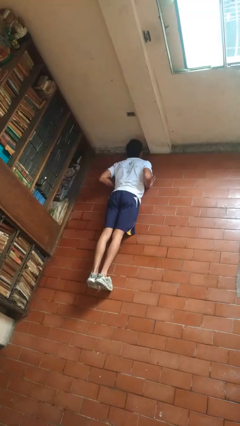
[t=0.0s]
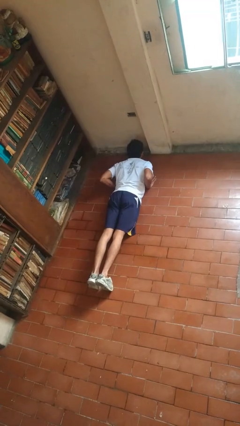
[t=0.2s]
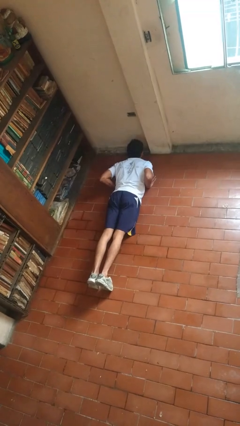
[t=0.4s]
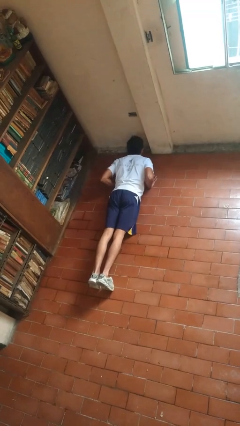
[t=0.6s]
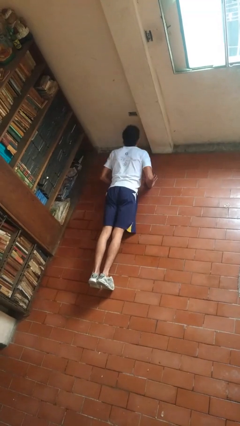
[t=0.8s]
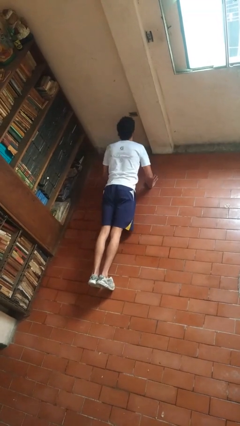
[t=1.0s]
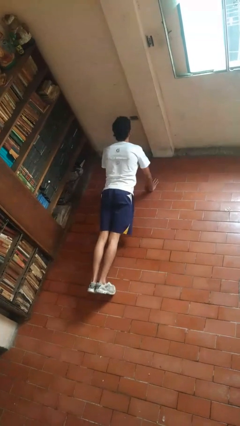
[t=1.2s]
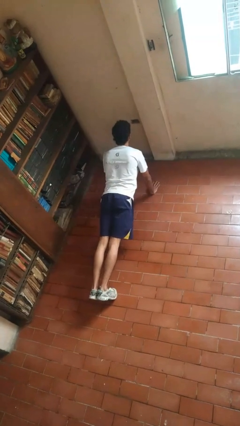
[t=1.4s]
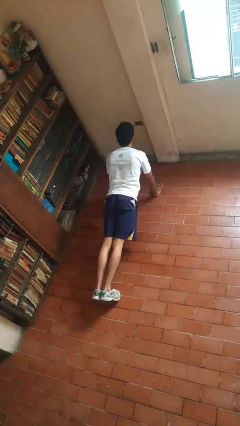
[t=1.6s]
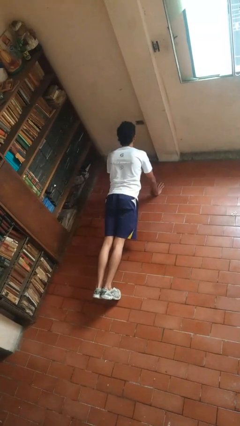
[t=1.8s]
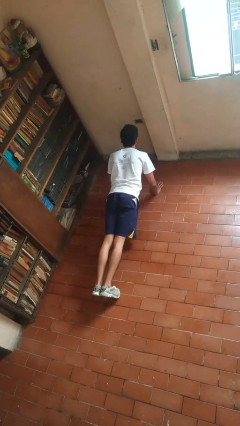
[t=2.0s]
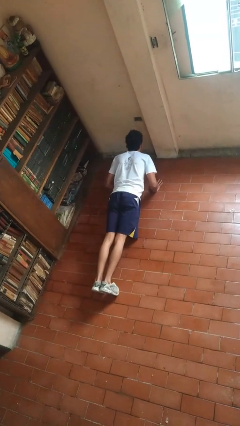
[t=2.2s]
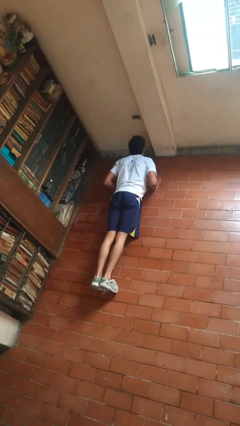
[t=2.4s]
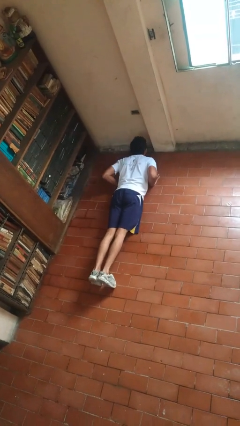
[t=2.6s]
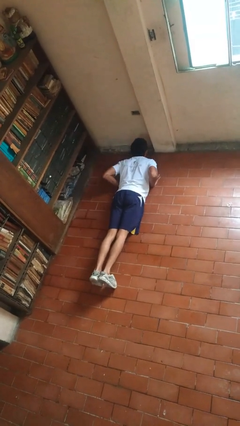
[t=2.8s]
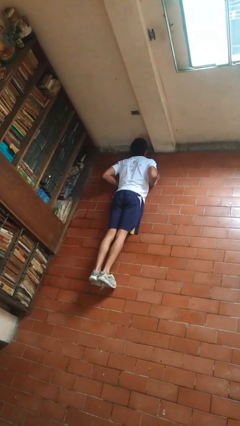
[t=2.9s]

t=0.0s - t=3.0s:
person exercises with pushup

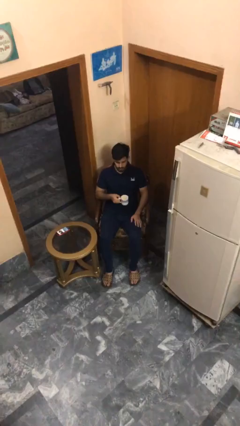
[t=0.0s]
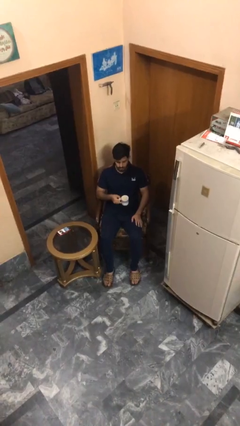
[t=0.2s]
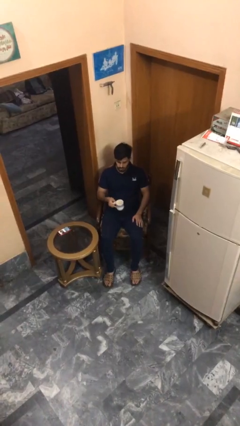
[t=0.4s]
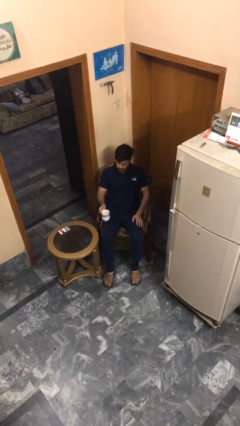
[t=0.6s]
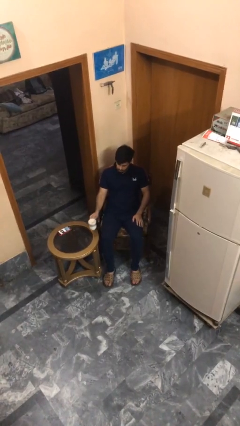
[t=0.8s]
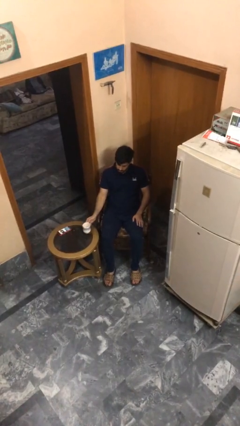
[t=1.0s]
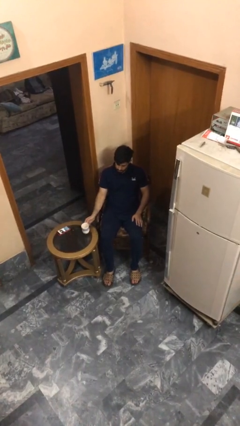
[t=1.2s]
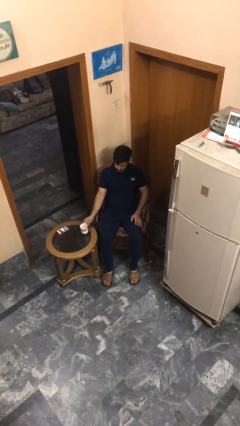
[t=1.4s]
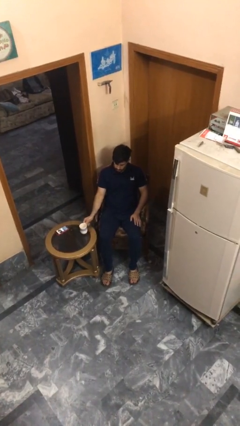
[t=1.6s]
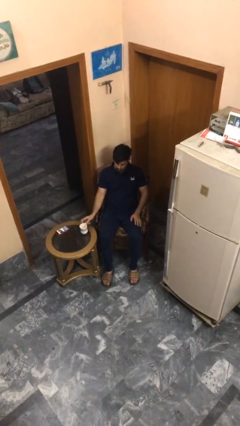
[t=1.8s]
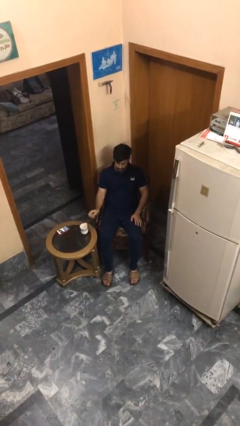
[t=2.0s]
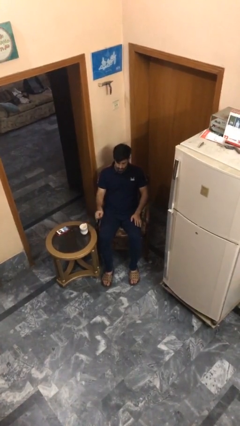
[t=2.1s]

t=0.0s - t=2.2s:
person puts down object on table

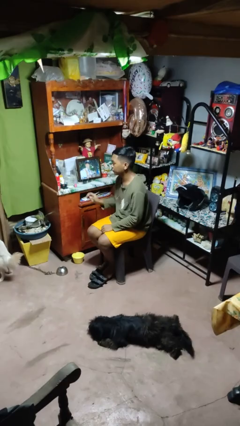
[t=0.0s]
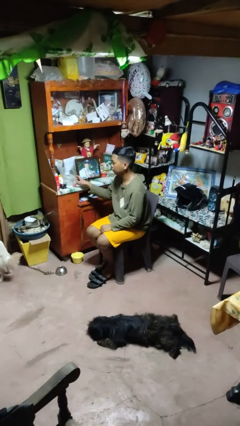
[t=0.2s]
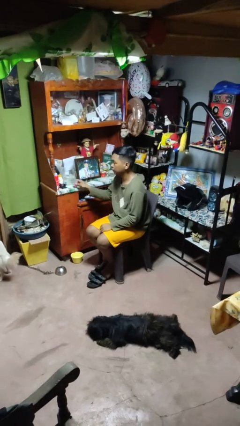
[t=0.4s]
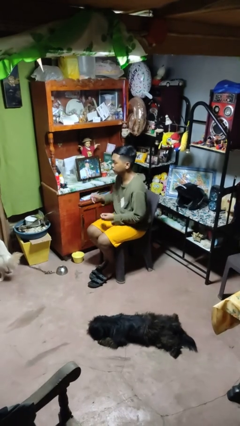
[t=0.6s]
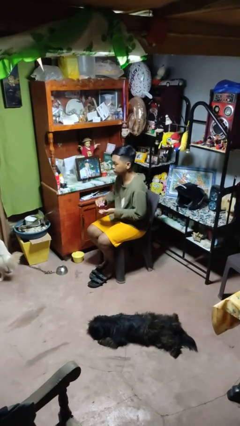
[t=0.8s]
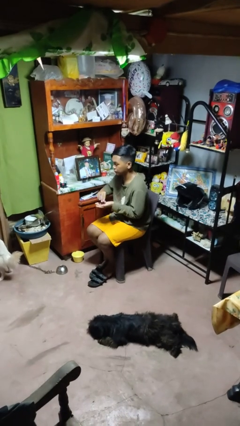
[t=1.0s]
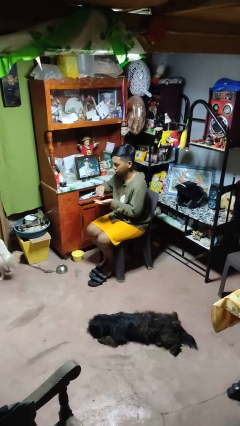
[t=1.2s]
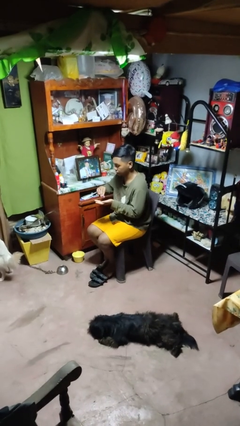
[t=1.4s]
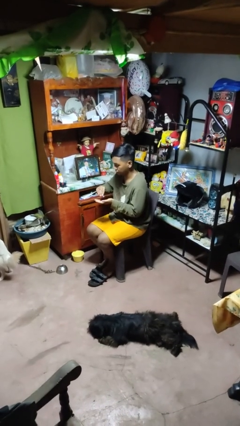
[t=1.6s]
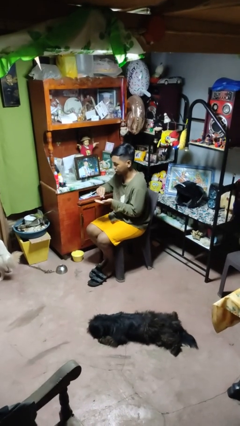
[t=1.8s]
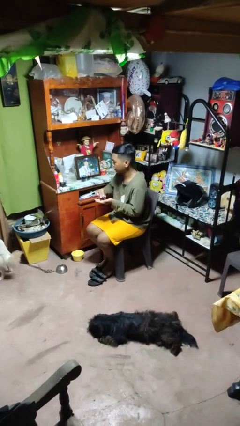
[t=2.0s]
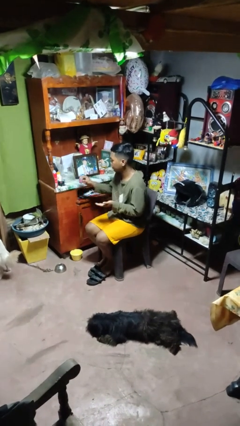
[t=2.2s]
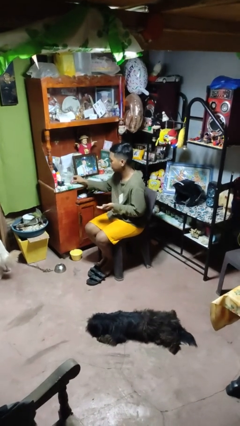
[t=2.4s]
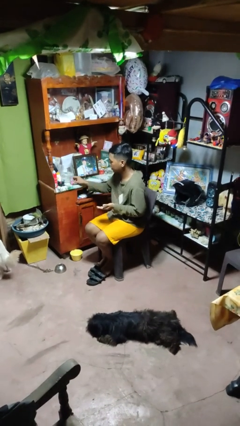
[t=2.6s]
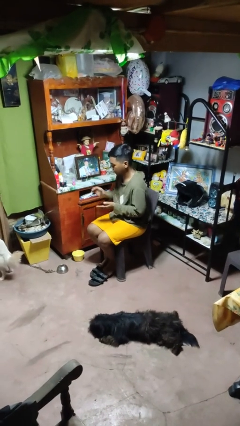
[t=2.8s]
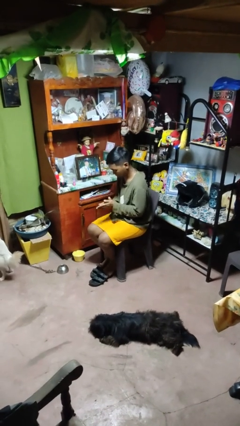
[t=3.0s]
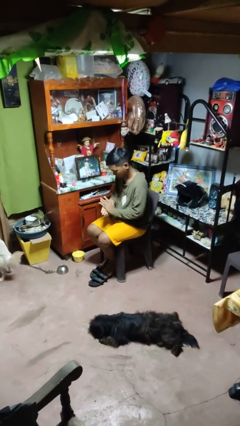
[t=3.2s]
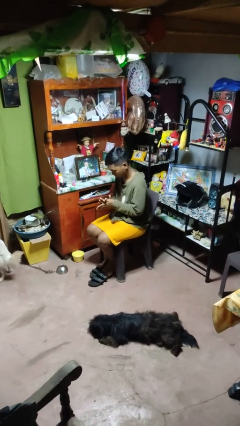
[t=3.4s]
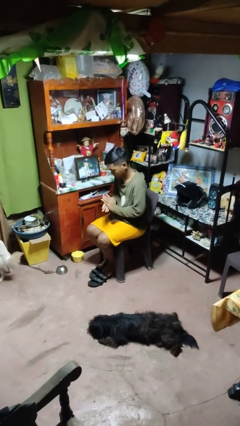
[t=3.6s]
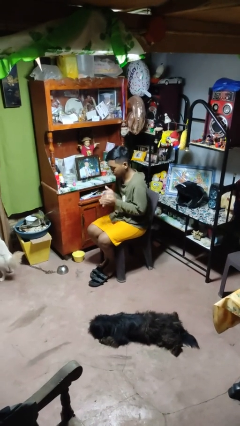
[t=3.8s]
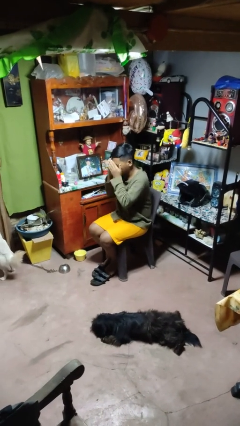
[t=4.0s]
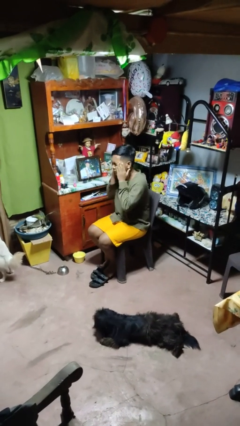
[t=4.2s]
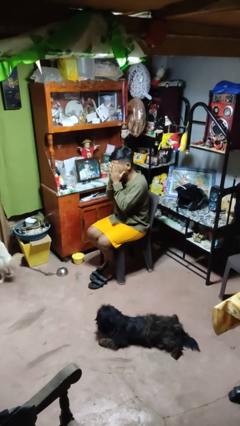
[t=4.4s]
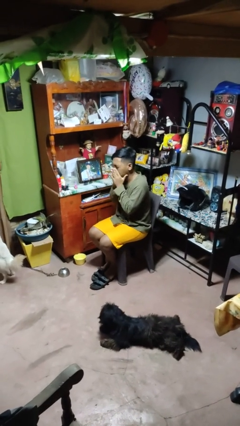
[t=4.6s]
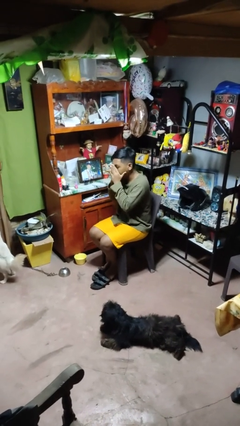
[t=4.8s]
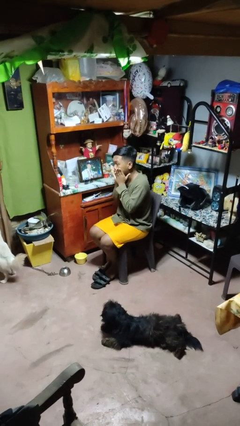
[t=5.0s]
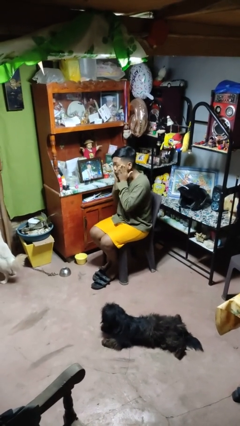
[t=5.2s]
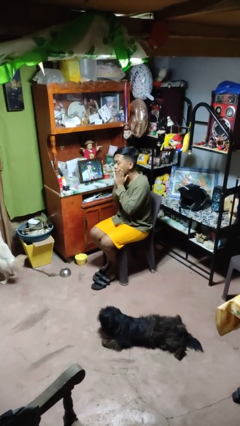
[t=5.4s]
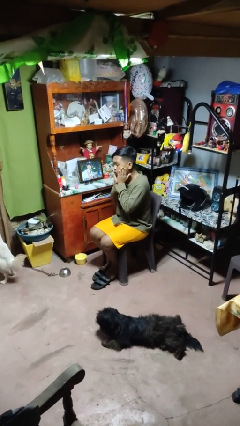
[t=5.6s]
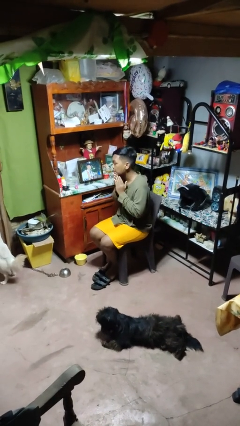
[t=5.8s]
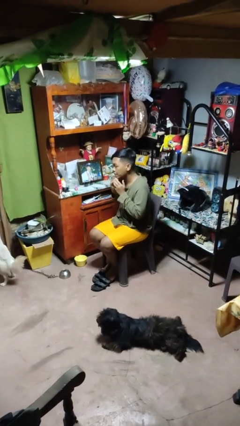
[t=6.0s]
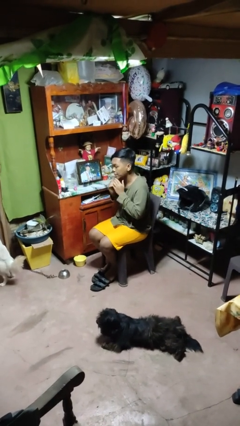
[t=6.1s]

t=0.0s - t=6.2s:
person applies facial moisturizer

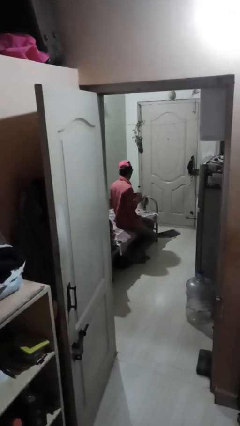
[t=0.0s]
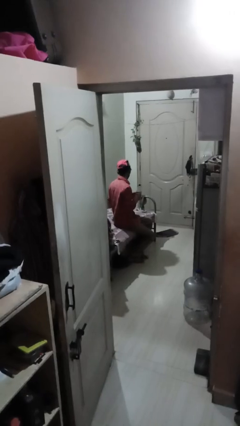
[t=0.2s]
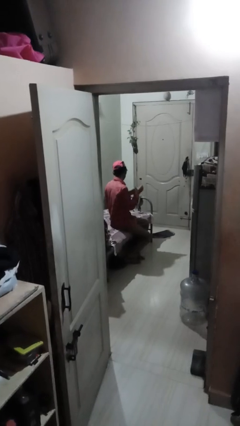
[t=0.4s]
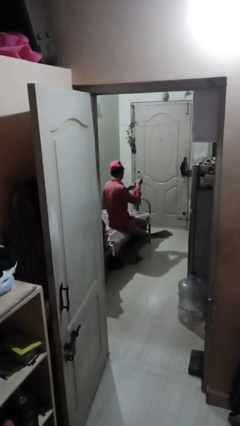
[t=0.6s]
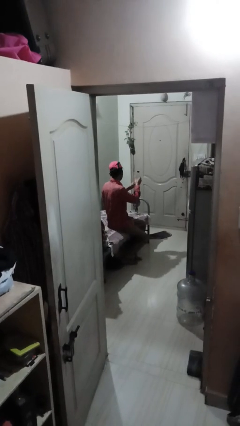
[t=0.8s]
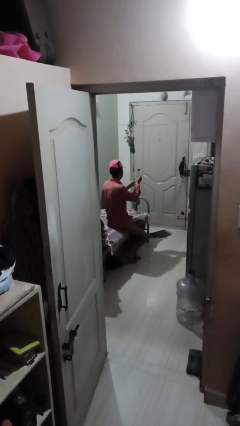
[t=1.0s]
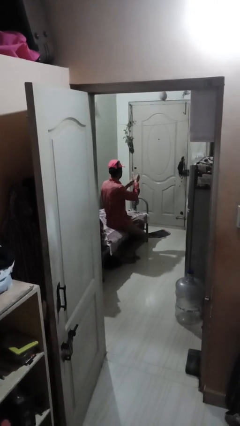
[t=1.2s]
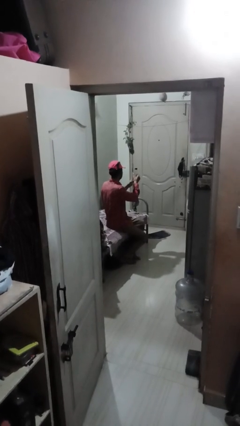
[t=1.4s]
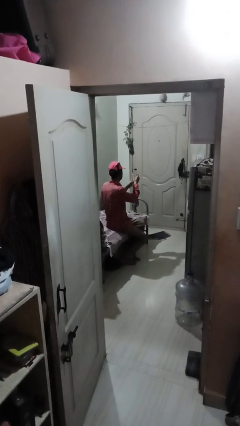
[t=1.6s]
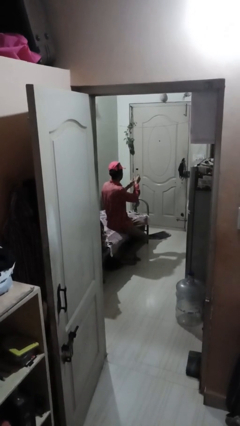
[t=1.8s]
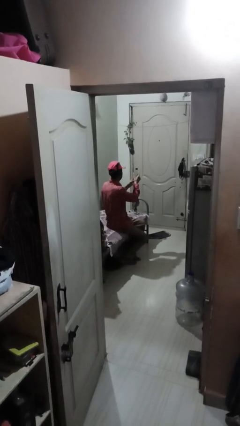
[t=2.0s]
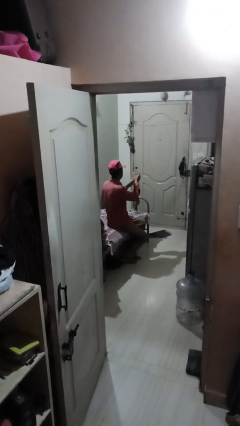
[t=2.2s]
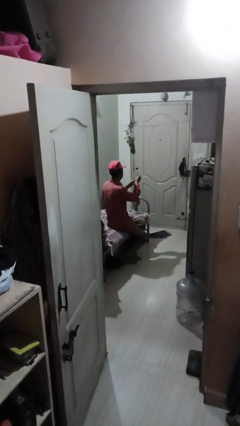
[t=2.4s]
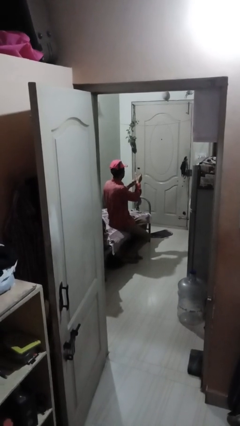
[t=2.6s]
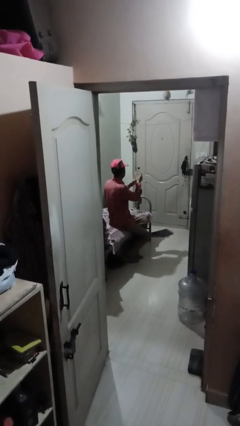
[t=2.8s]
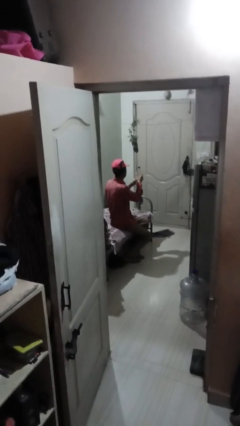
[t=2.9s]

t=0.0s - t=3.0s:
person squeezes object

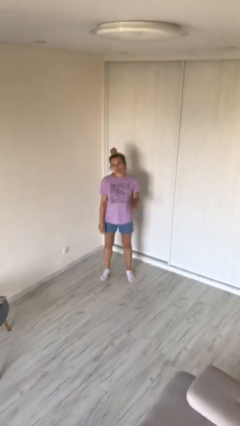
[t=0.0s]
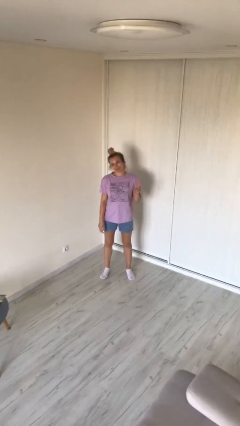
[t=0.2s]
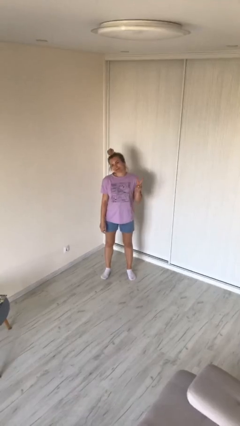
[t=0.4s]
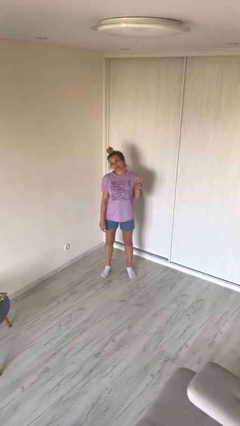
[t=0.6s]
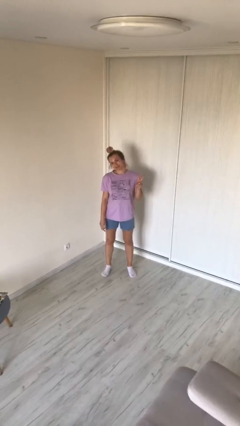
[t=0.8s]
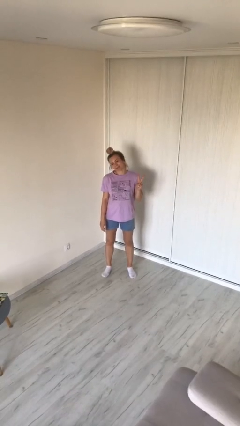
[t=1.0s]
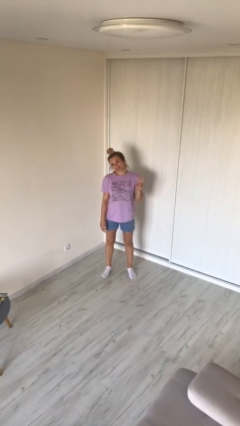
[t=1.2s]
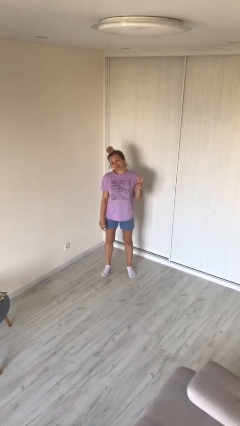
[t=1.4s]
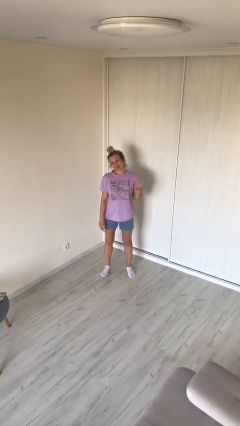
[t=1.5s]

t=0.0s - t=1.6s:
person gestures peace

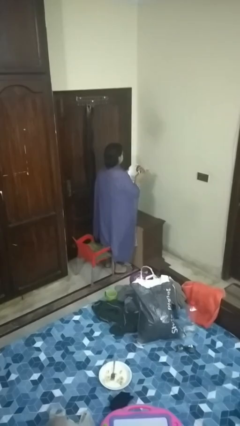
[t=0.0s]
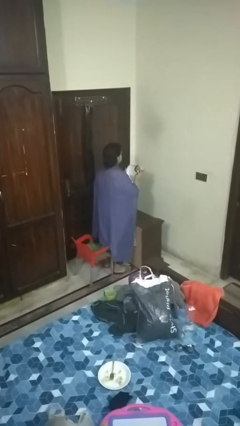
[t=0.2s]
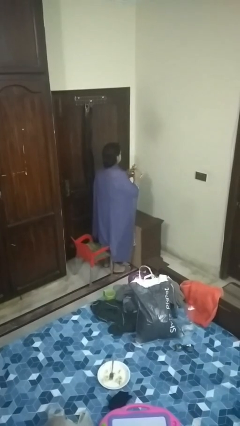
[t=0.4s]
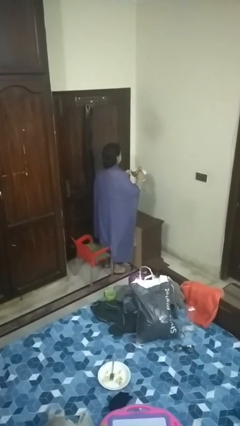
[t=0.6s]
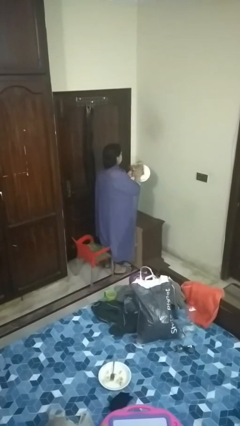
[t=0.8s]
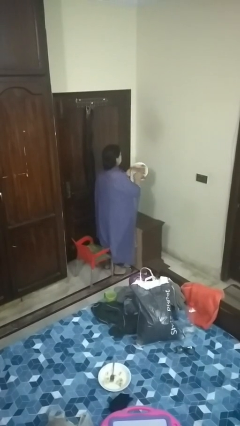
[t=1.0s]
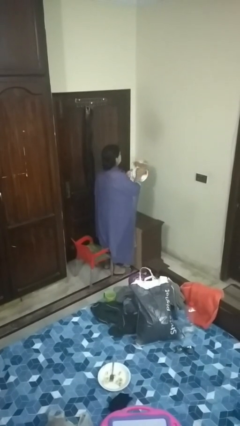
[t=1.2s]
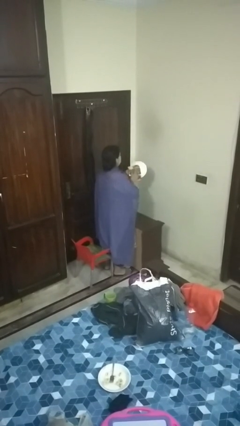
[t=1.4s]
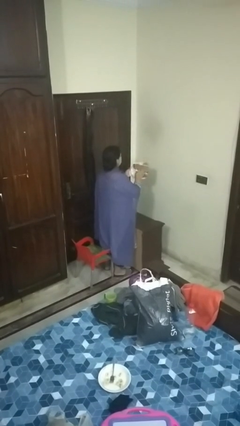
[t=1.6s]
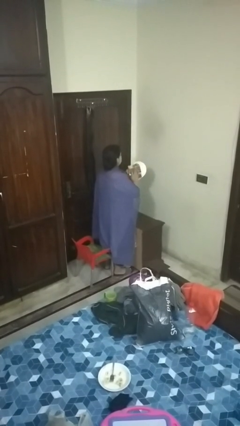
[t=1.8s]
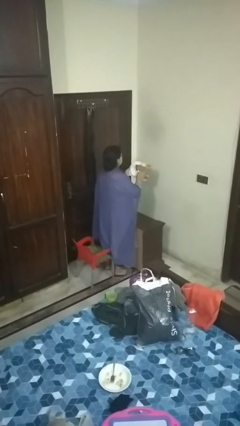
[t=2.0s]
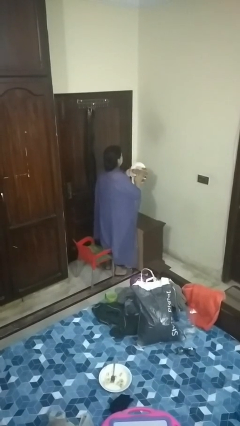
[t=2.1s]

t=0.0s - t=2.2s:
person dries dish
